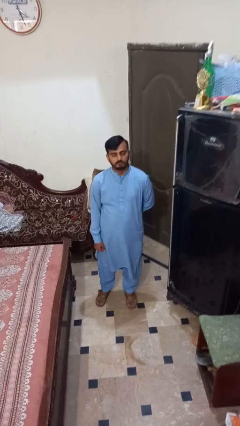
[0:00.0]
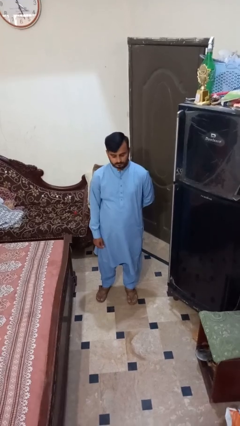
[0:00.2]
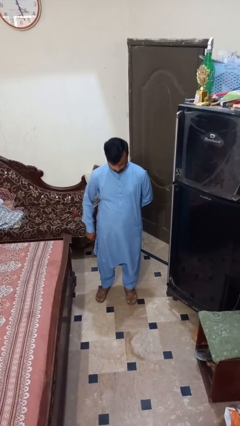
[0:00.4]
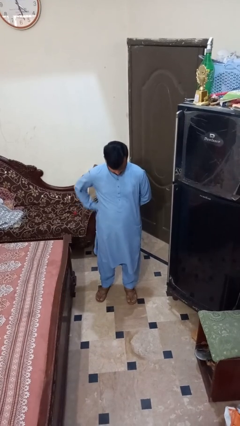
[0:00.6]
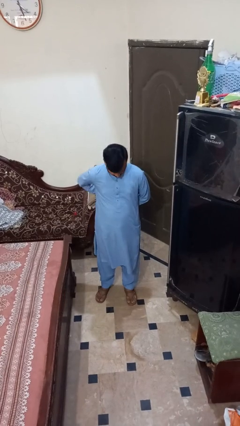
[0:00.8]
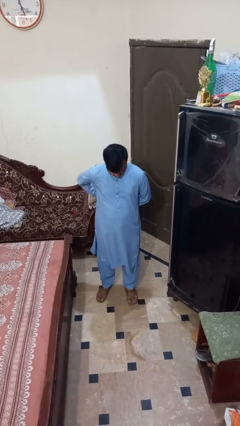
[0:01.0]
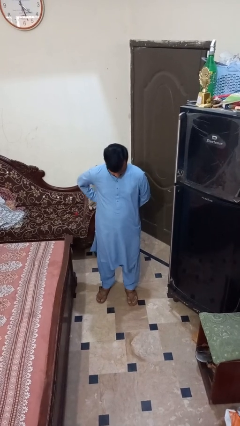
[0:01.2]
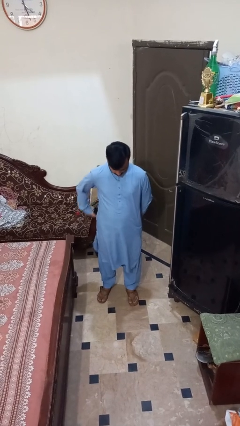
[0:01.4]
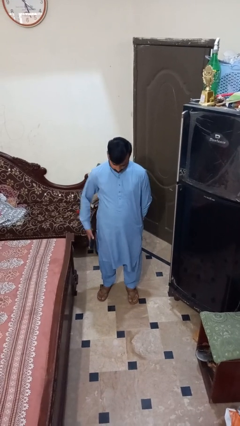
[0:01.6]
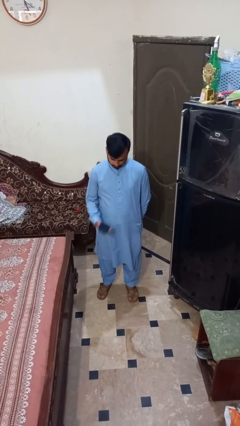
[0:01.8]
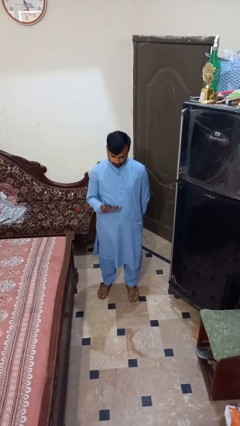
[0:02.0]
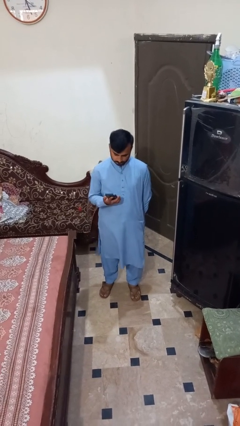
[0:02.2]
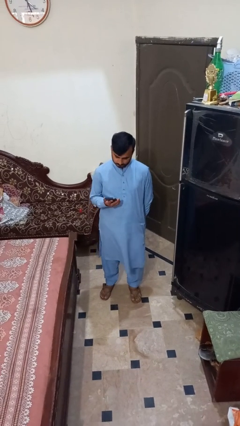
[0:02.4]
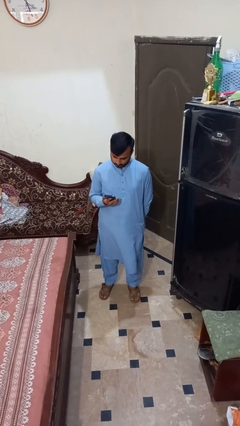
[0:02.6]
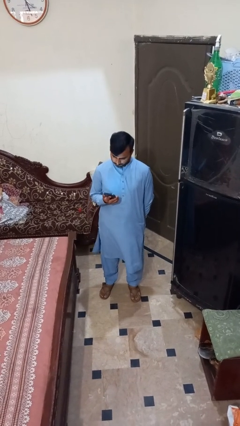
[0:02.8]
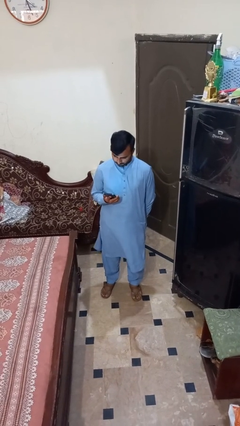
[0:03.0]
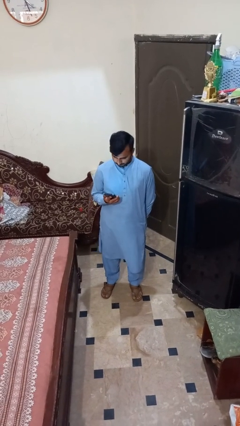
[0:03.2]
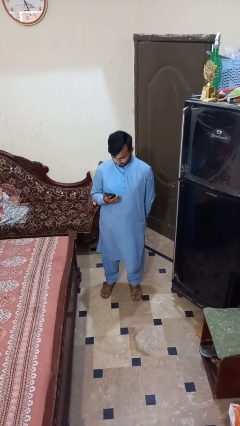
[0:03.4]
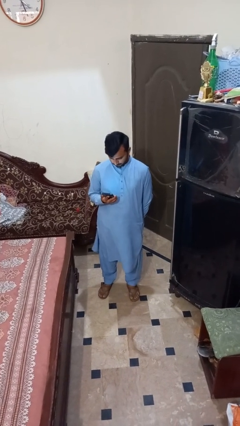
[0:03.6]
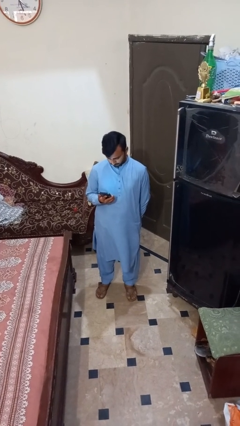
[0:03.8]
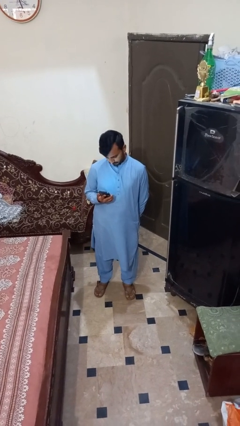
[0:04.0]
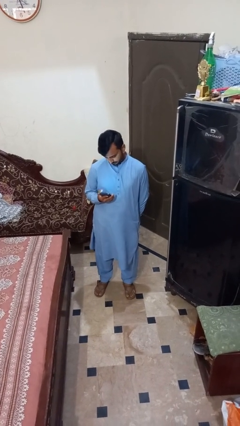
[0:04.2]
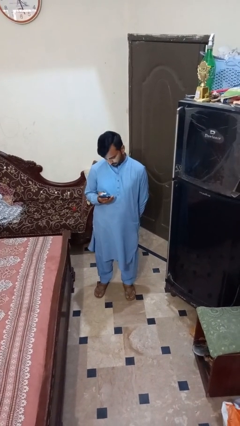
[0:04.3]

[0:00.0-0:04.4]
person takes phone from pocket

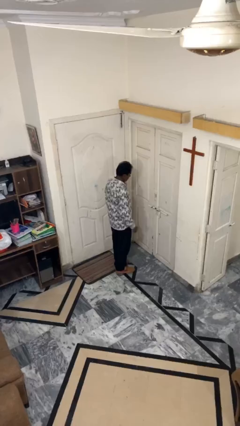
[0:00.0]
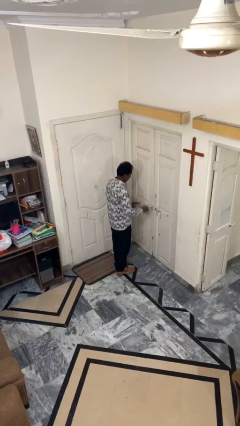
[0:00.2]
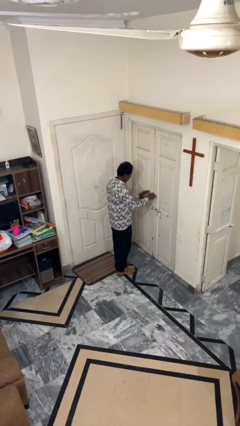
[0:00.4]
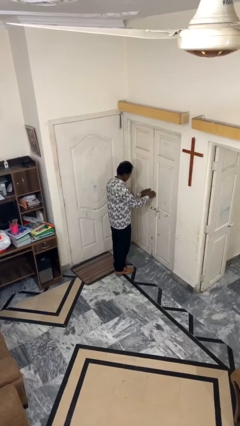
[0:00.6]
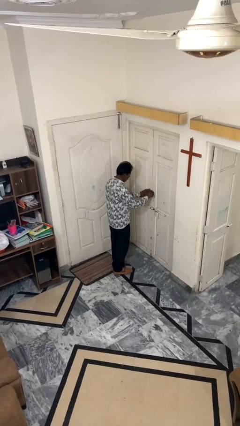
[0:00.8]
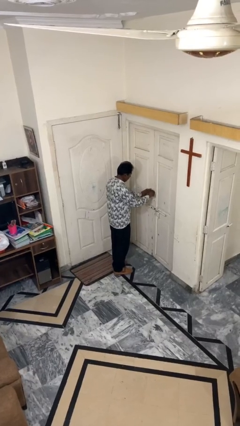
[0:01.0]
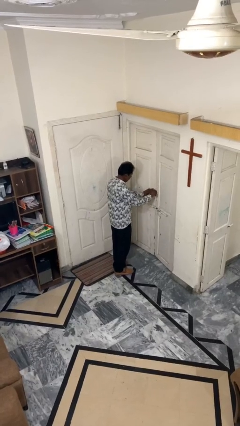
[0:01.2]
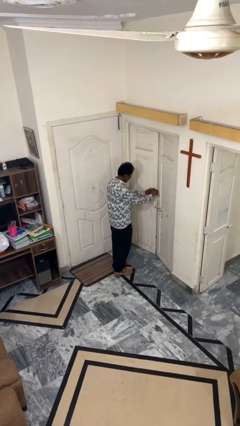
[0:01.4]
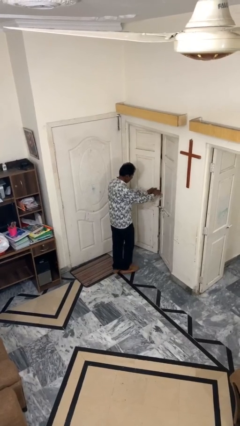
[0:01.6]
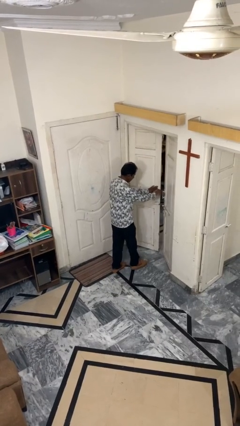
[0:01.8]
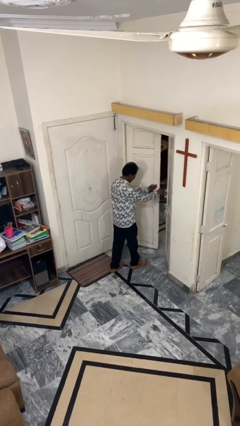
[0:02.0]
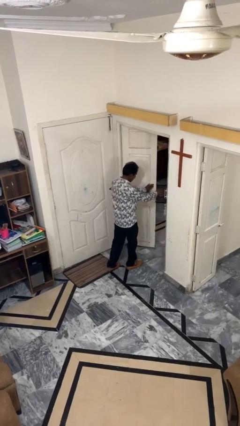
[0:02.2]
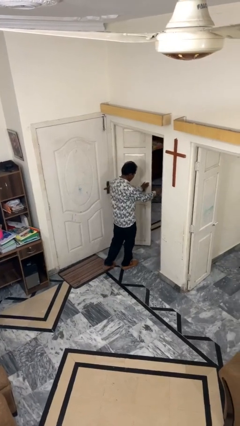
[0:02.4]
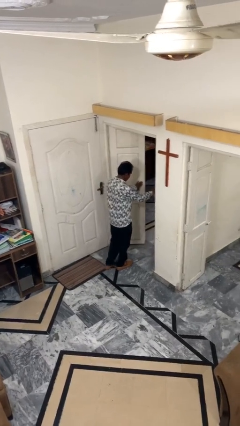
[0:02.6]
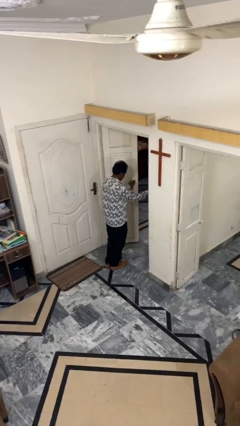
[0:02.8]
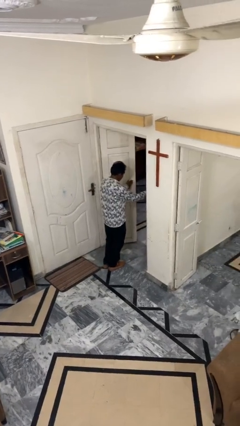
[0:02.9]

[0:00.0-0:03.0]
person opens facility door

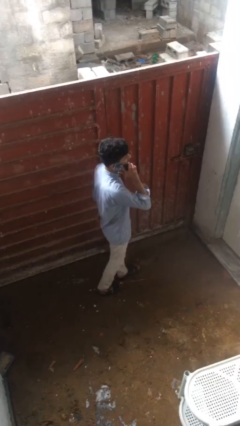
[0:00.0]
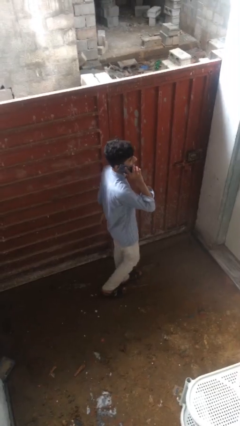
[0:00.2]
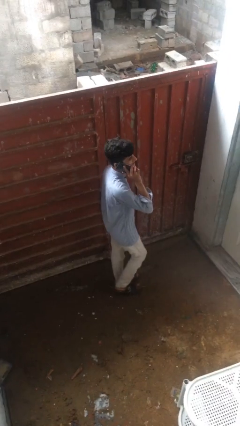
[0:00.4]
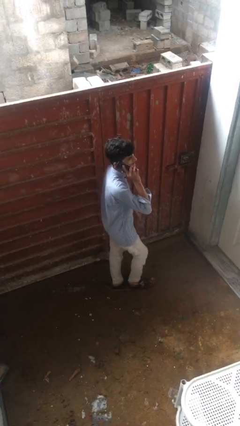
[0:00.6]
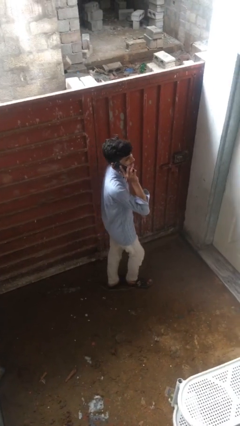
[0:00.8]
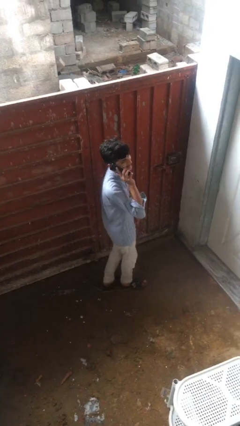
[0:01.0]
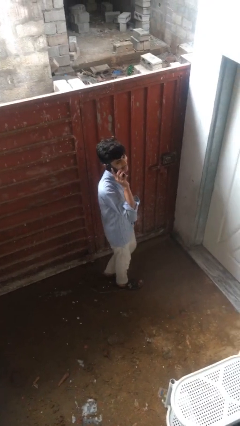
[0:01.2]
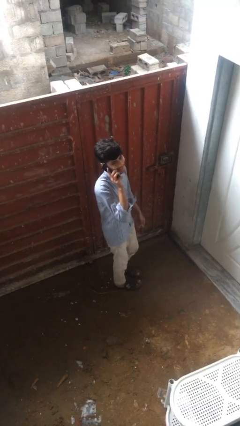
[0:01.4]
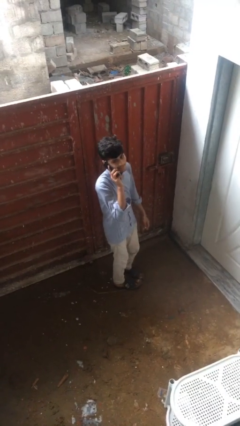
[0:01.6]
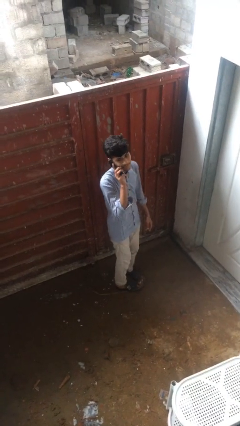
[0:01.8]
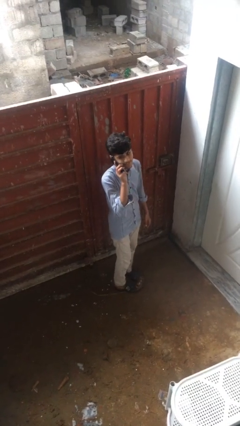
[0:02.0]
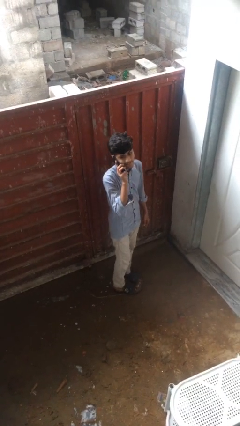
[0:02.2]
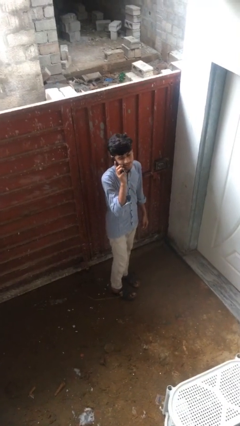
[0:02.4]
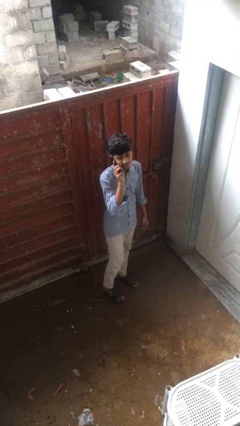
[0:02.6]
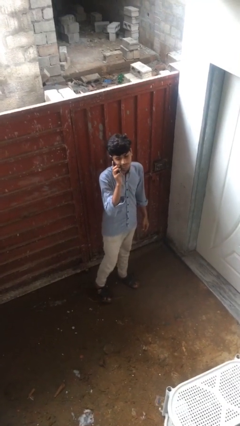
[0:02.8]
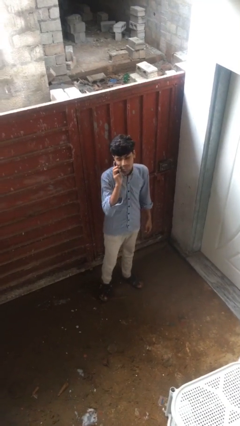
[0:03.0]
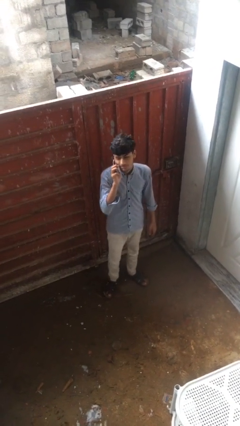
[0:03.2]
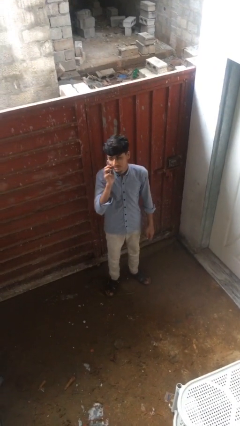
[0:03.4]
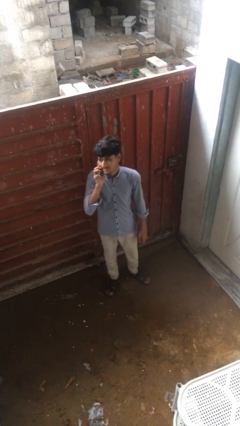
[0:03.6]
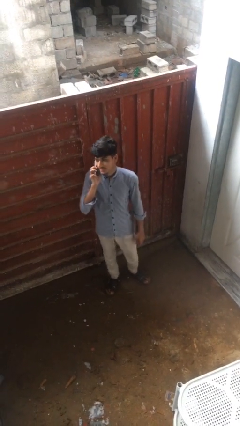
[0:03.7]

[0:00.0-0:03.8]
person talks on phone

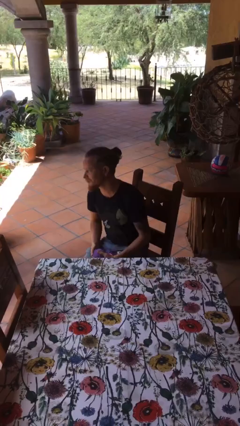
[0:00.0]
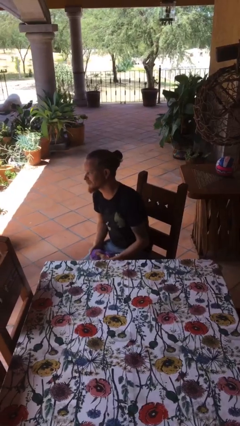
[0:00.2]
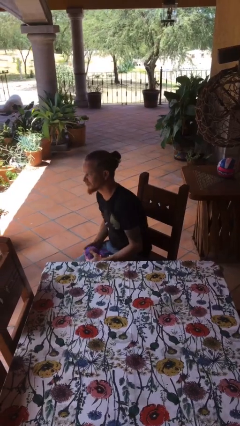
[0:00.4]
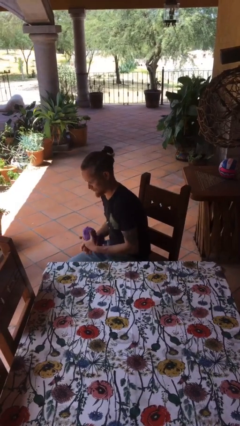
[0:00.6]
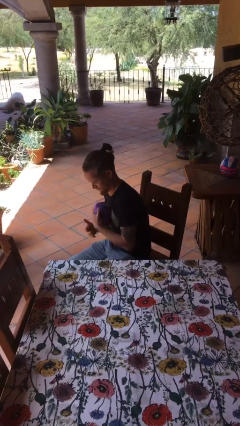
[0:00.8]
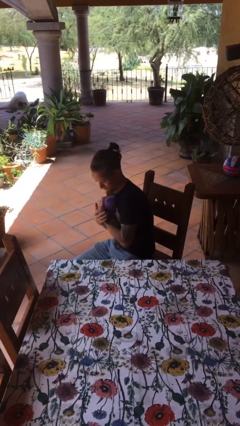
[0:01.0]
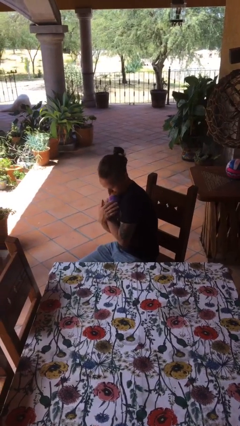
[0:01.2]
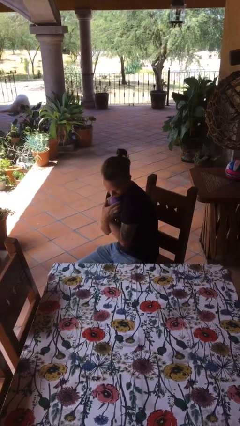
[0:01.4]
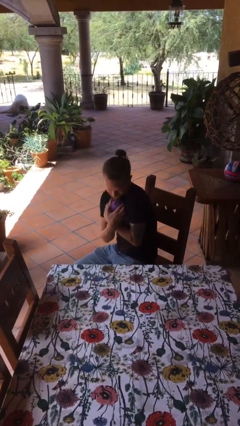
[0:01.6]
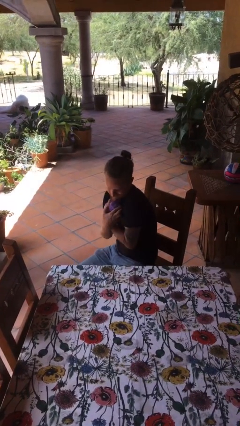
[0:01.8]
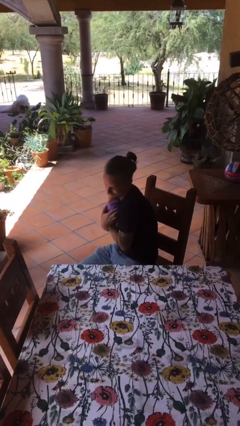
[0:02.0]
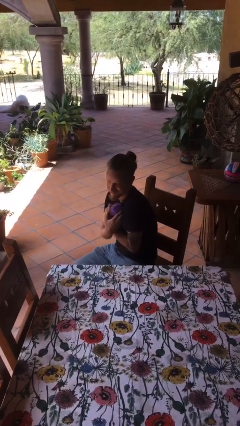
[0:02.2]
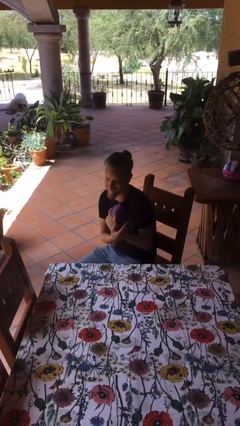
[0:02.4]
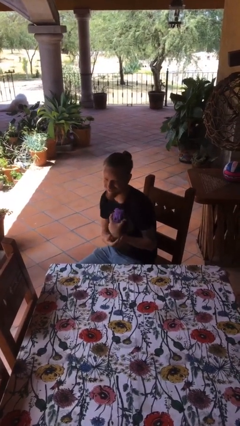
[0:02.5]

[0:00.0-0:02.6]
person hugs stuffed animal

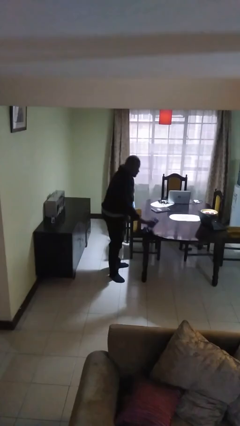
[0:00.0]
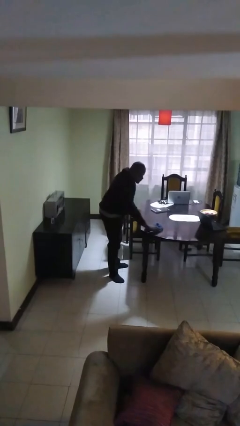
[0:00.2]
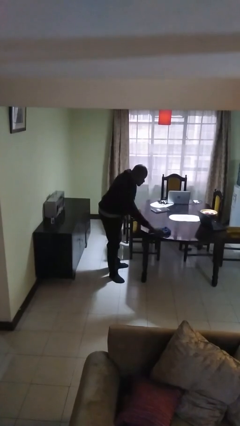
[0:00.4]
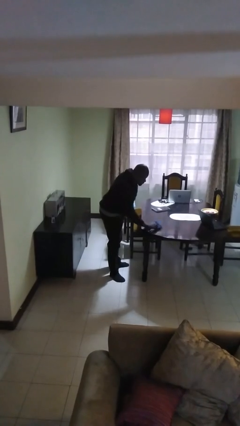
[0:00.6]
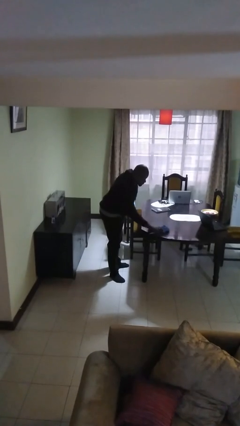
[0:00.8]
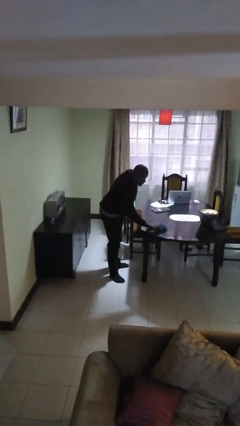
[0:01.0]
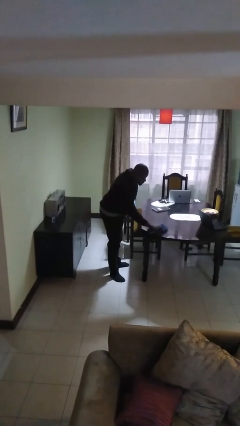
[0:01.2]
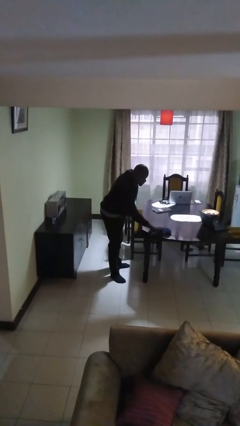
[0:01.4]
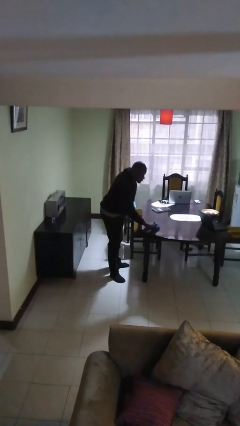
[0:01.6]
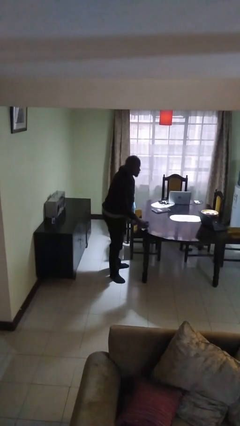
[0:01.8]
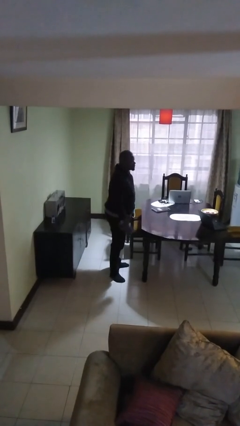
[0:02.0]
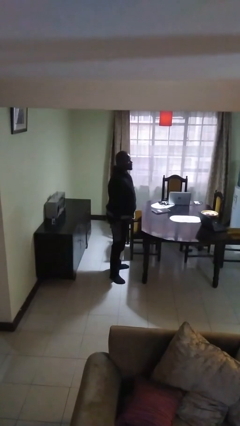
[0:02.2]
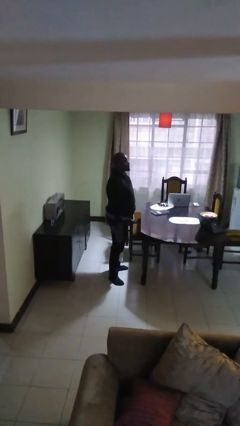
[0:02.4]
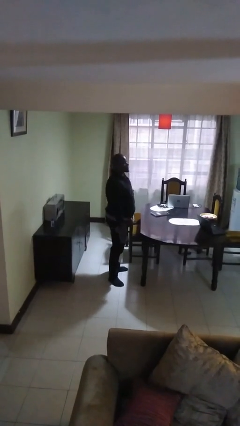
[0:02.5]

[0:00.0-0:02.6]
person cleans table with rag

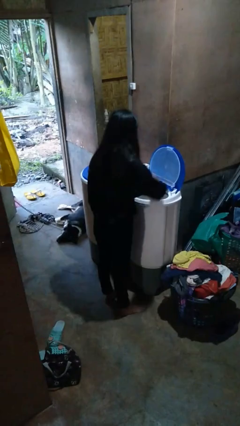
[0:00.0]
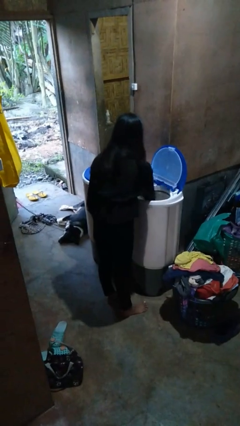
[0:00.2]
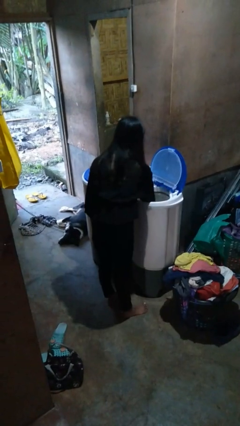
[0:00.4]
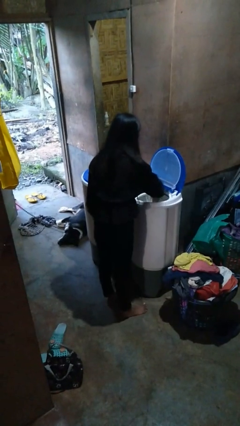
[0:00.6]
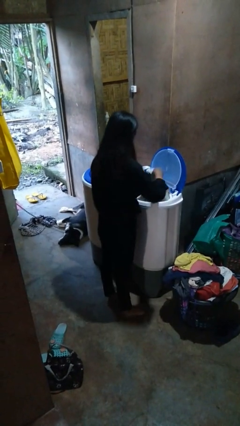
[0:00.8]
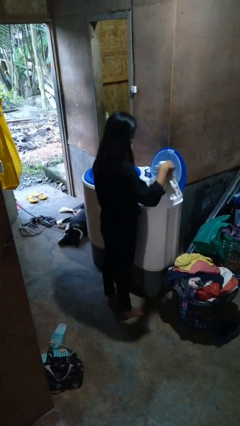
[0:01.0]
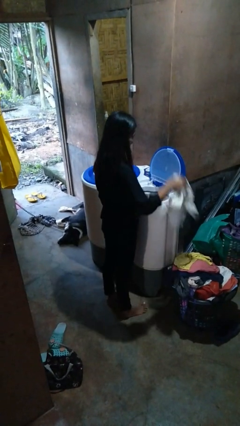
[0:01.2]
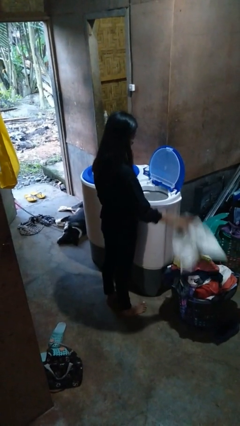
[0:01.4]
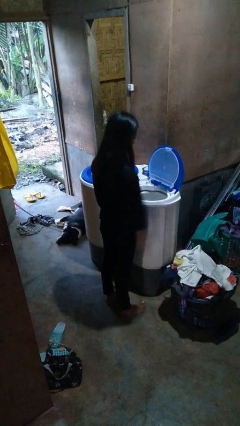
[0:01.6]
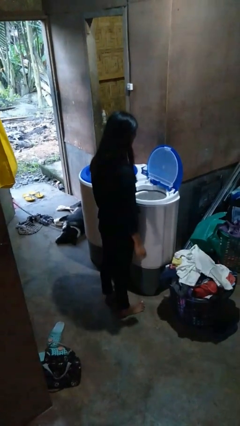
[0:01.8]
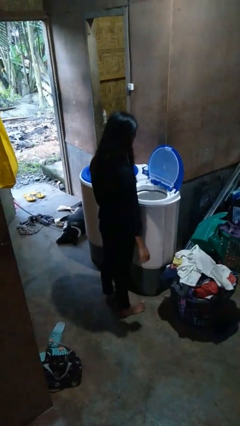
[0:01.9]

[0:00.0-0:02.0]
person unloads dryer
